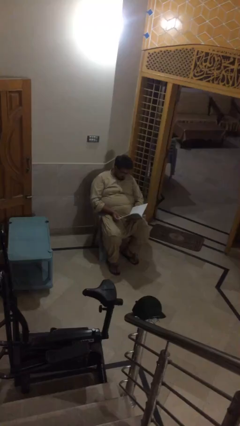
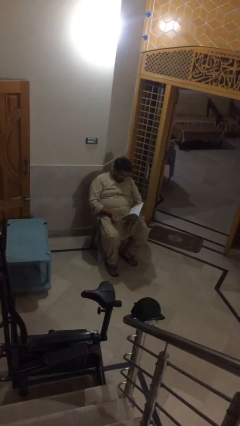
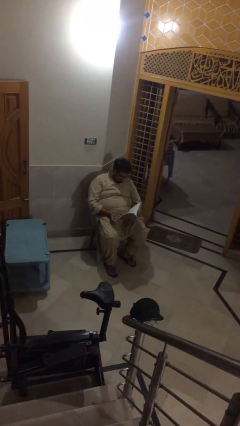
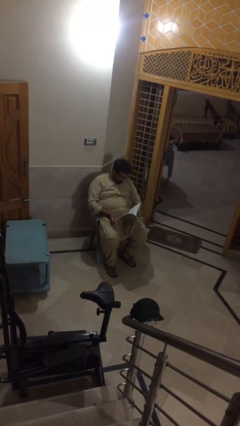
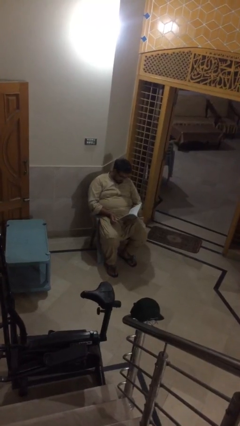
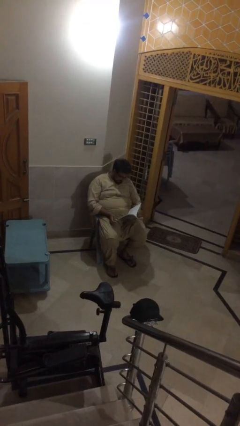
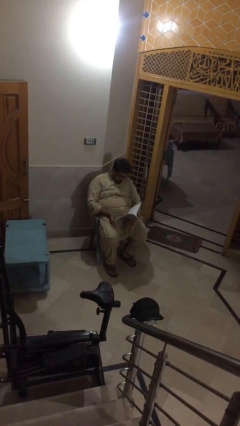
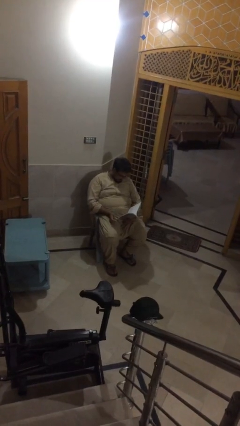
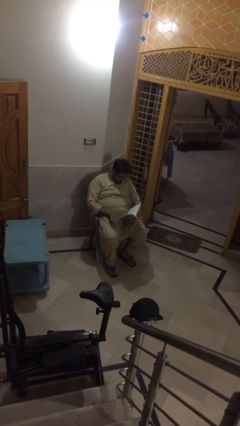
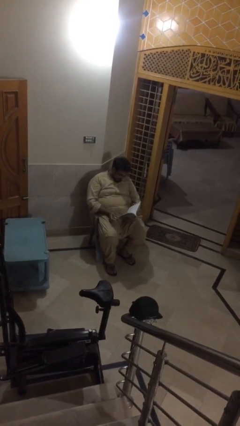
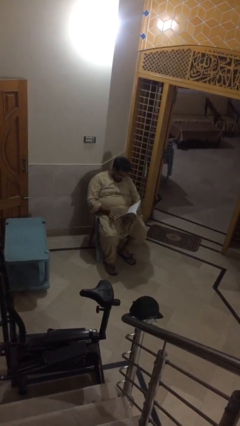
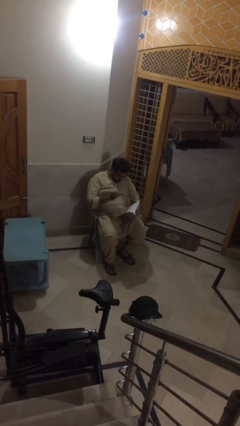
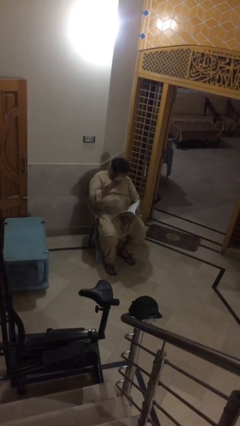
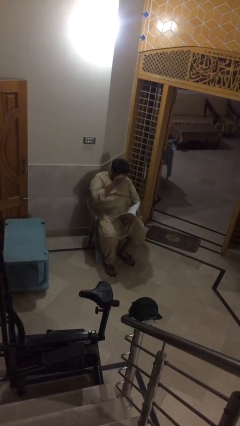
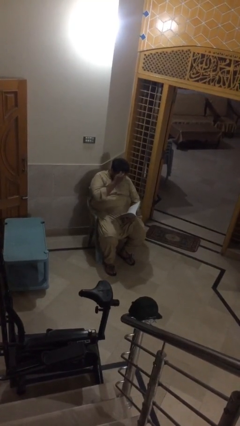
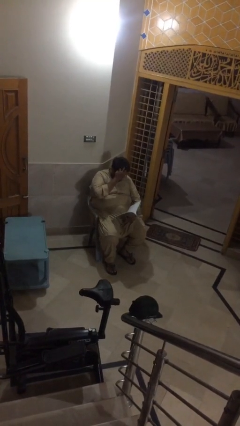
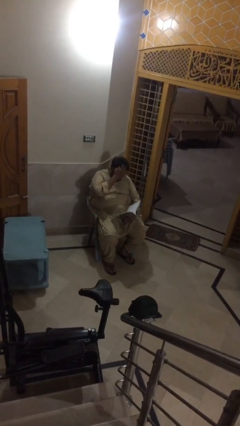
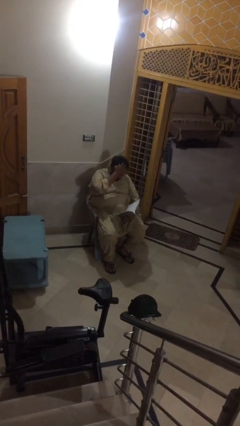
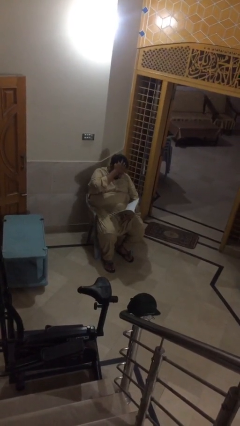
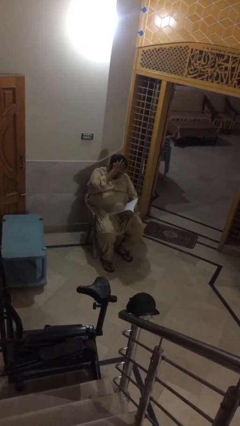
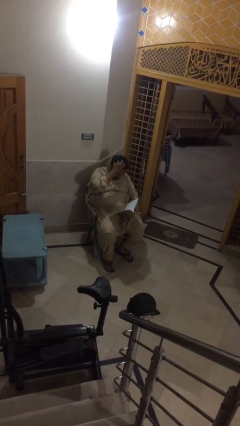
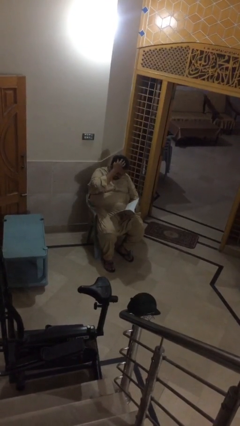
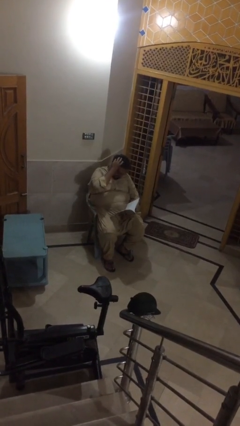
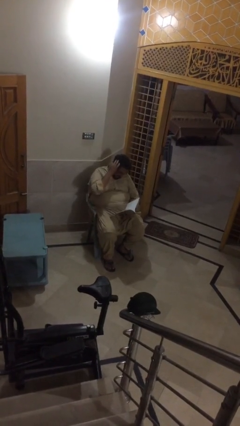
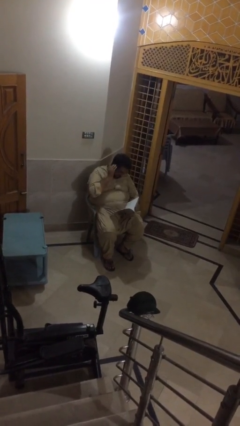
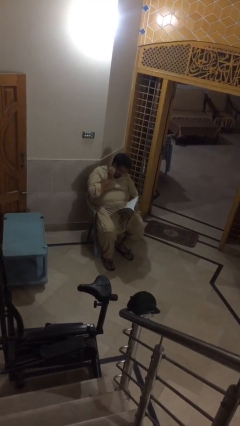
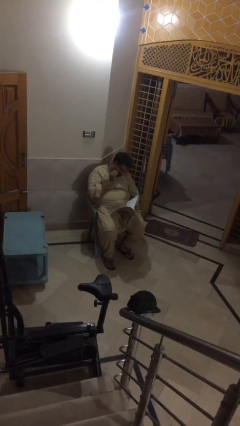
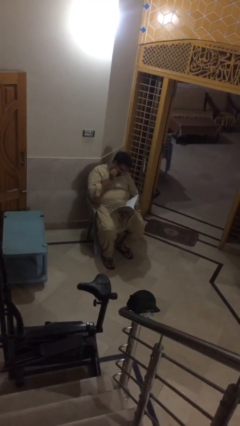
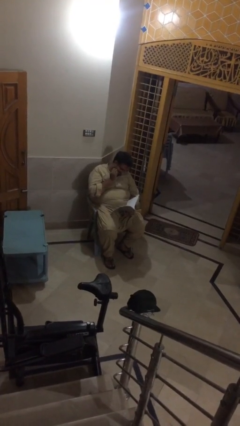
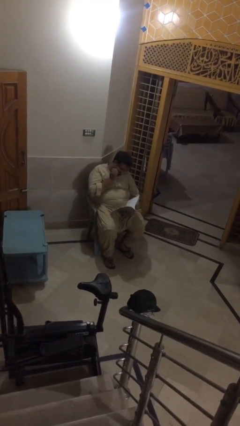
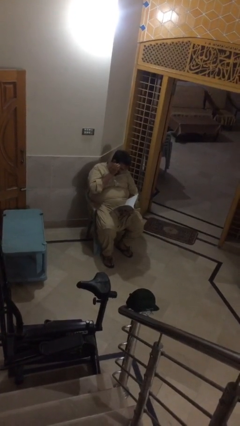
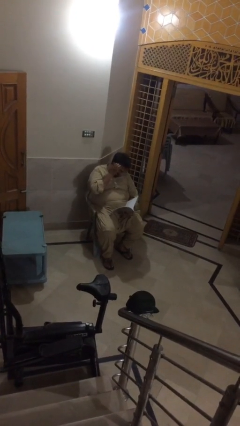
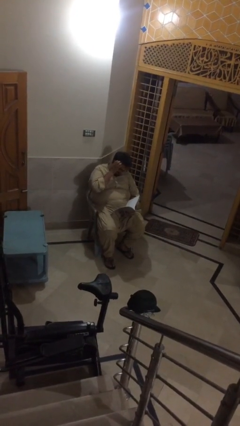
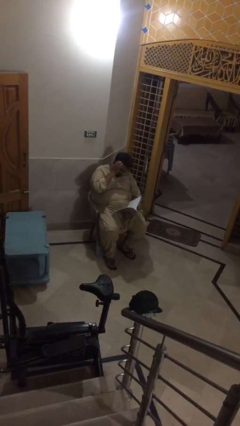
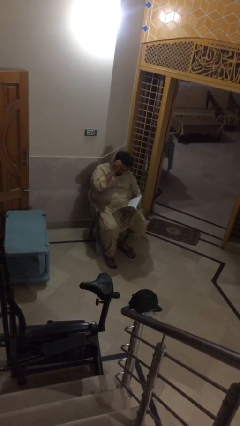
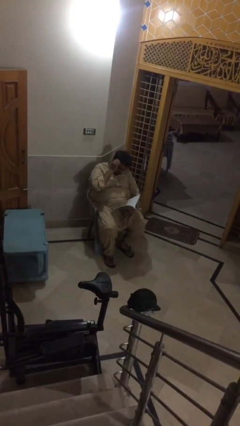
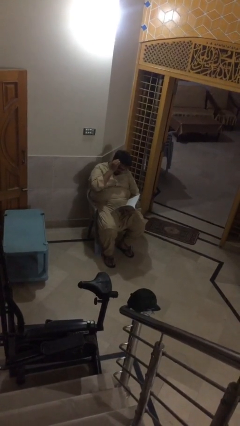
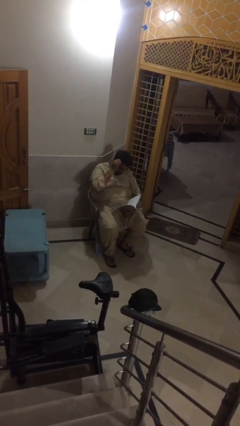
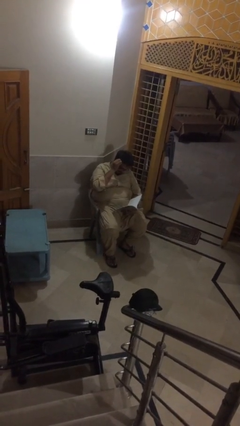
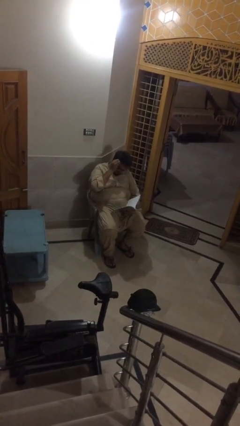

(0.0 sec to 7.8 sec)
person reads document

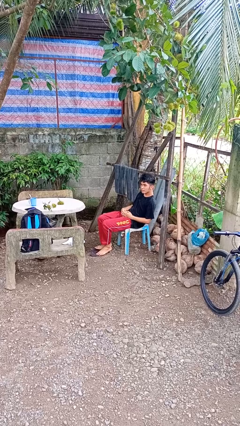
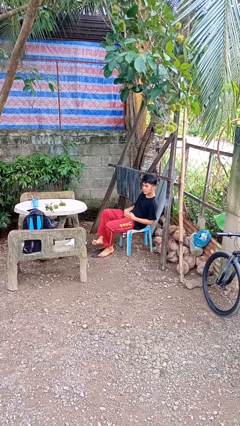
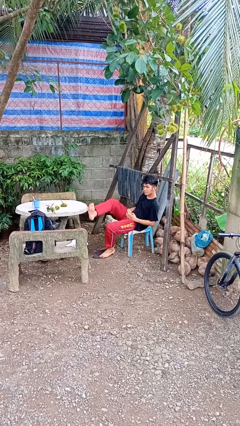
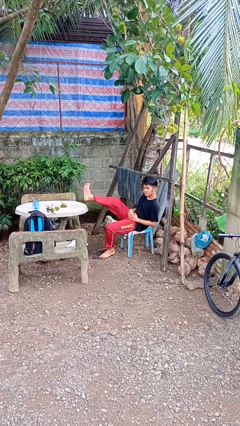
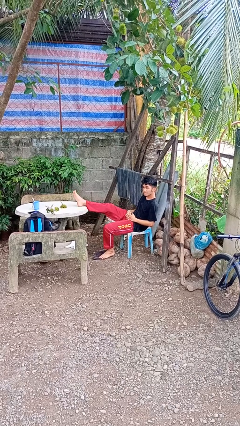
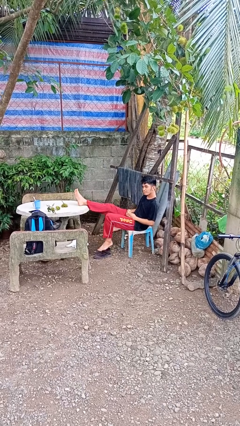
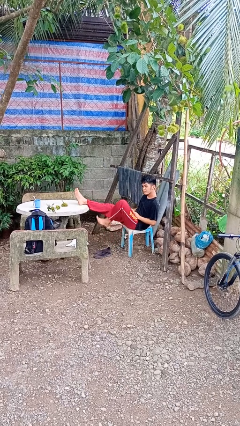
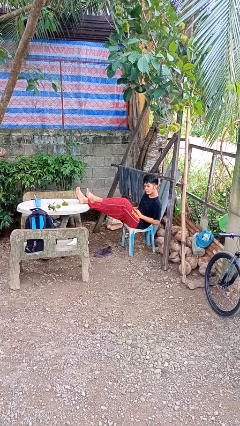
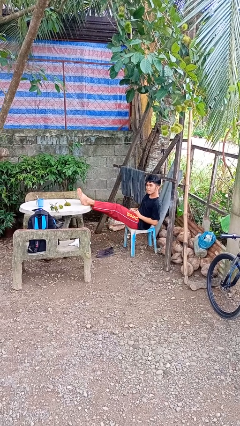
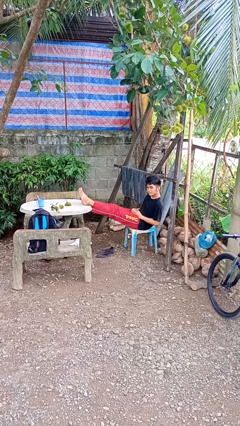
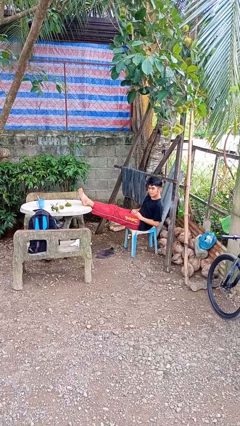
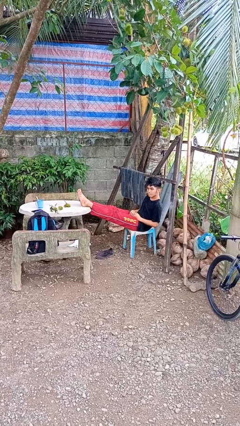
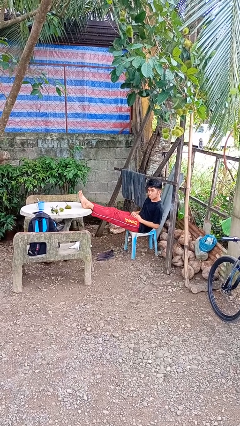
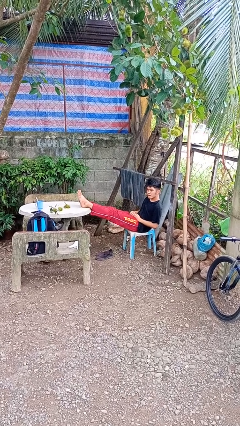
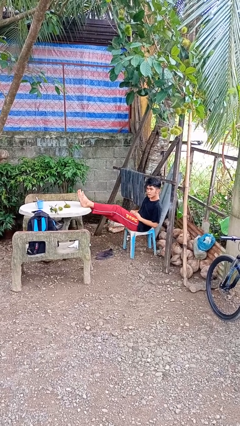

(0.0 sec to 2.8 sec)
person puts feet up

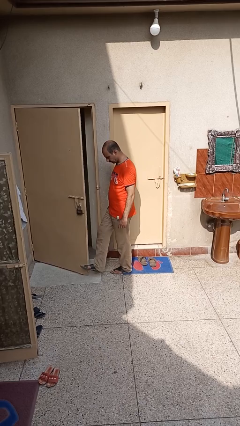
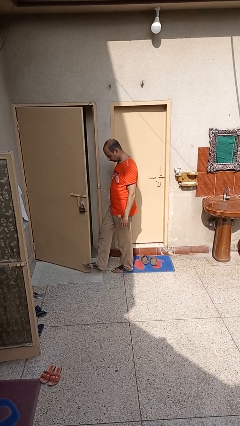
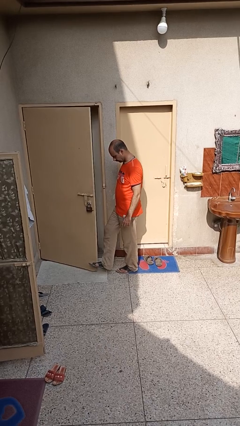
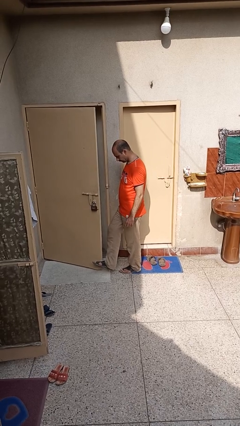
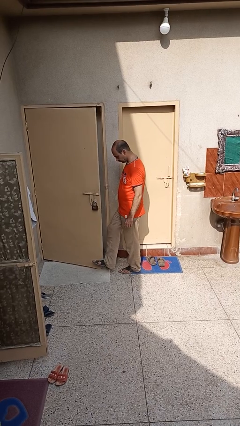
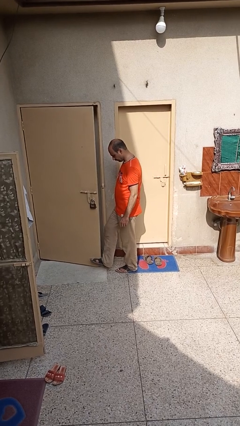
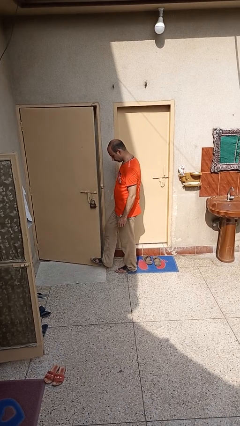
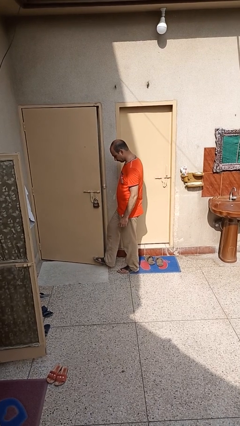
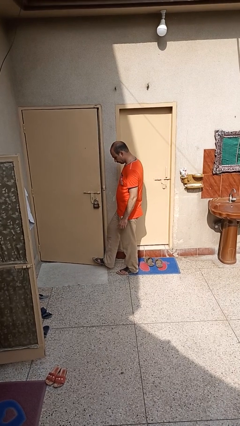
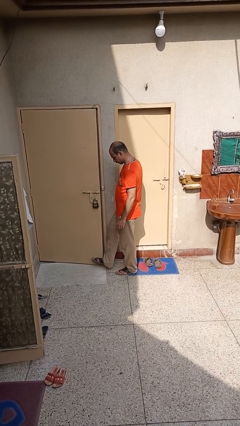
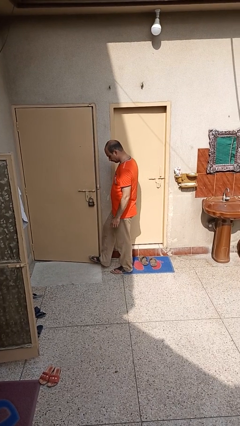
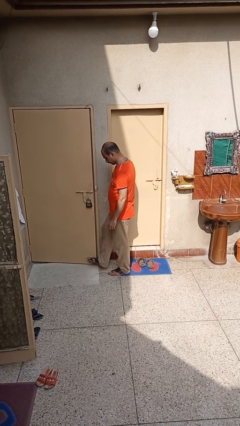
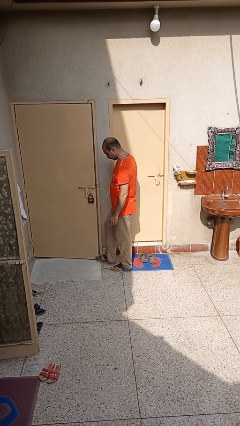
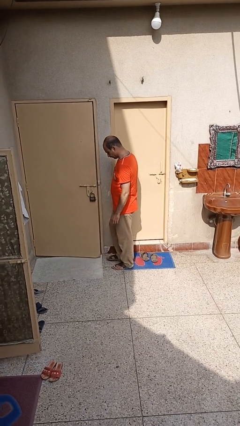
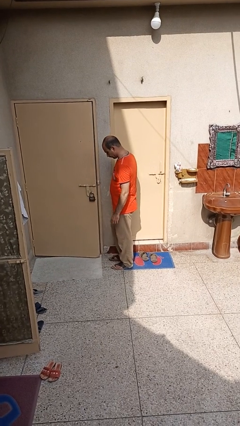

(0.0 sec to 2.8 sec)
person closes door with foot

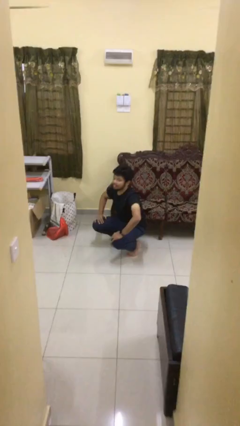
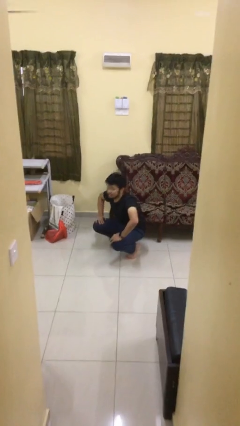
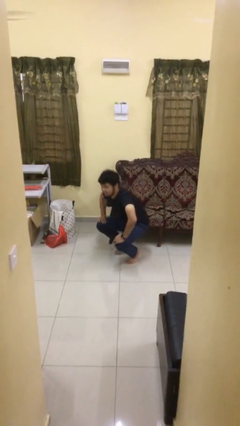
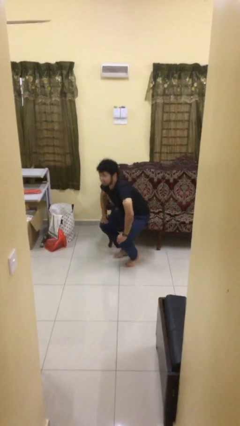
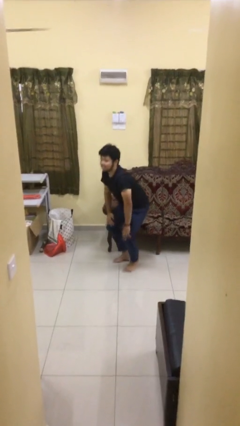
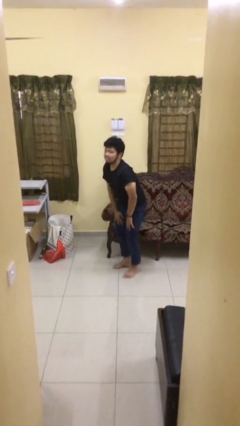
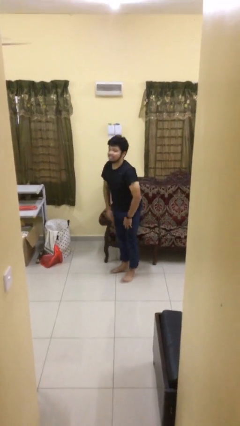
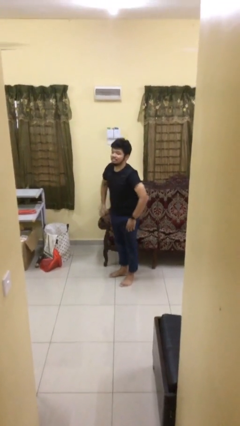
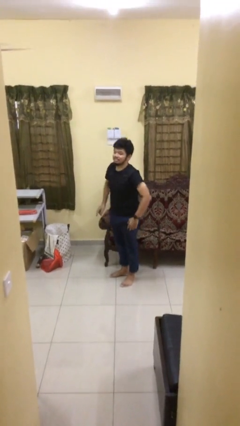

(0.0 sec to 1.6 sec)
person stands up

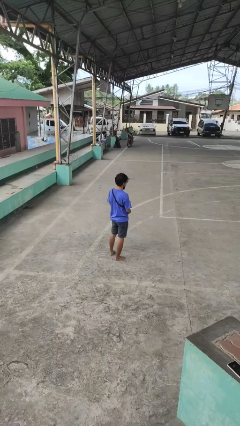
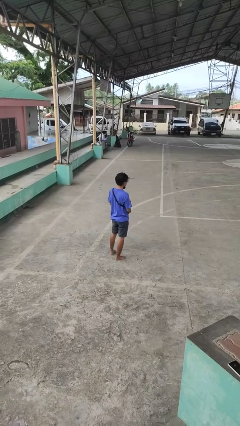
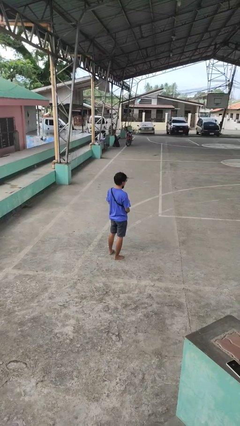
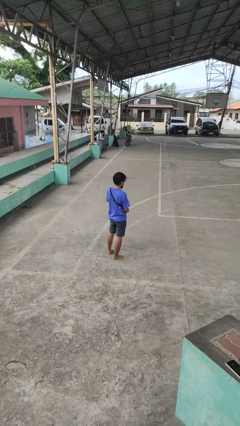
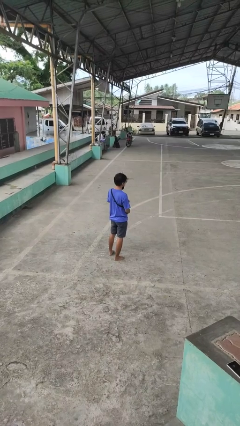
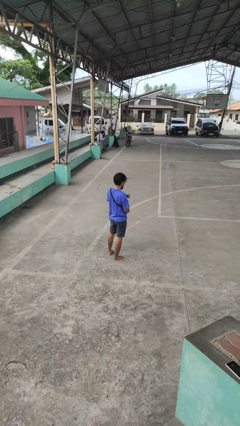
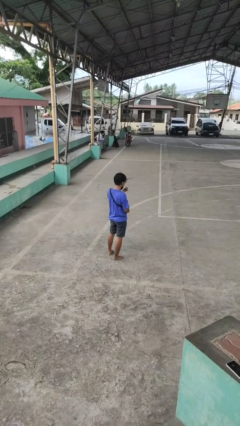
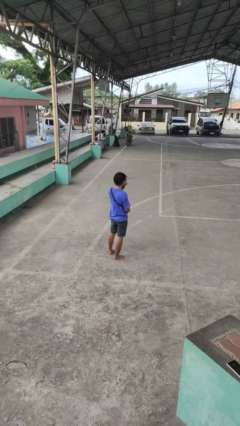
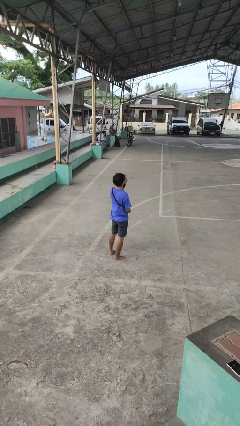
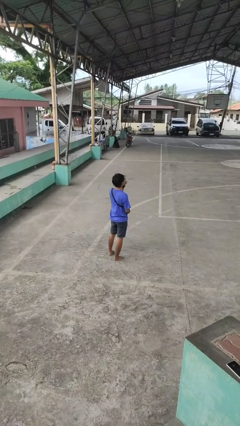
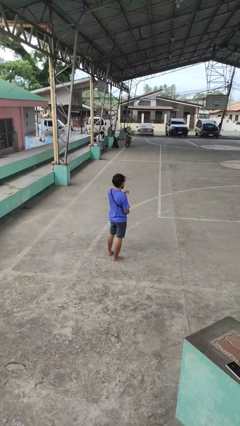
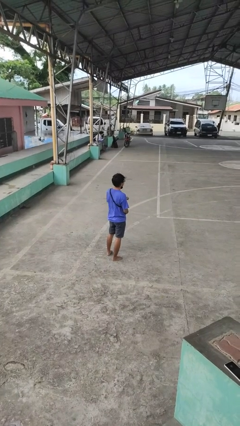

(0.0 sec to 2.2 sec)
person eats snack from bag

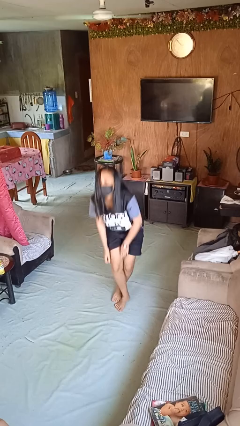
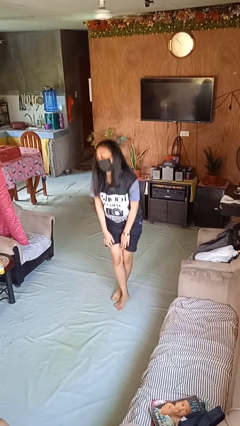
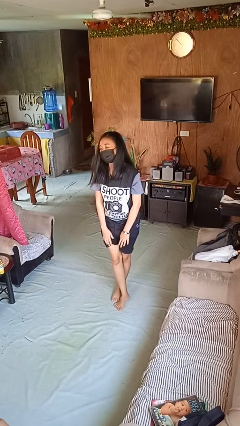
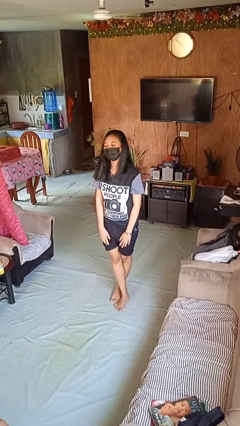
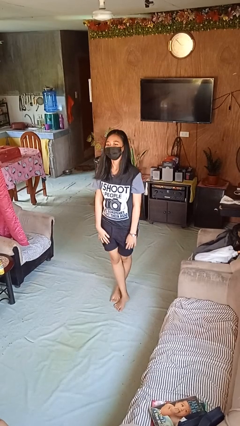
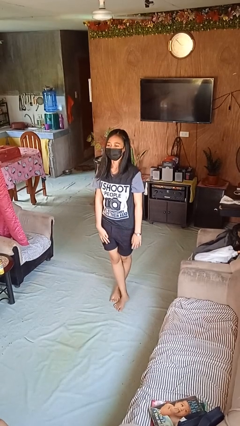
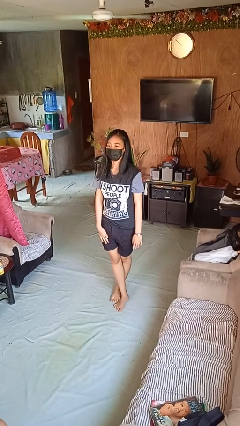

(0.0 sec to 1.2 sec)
person stands up from floor
